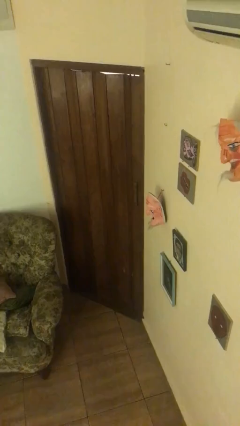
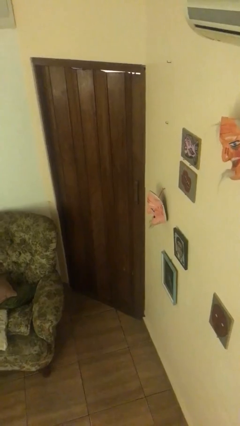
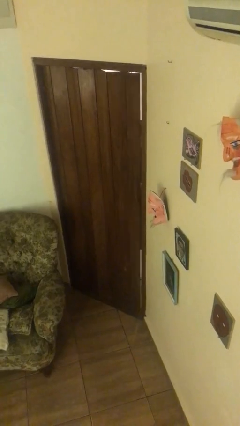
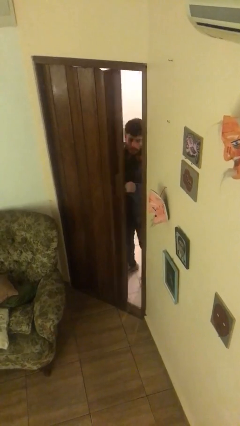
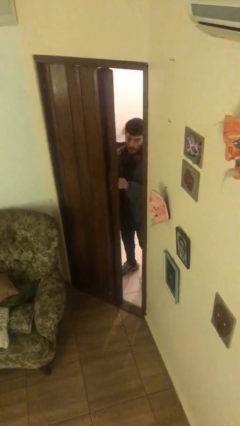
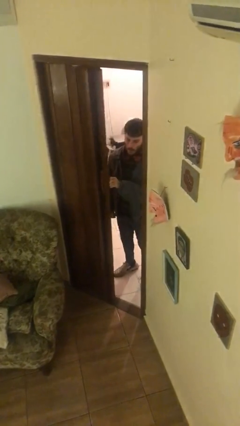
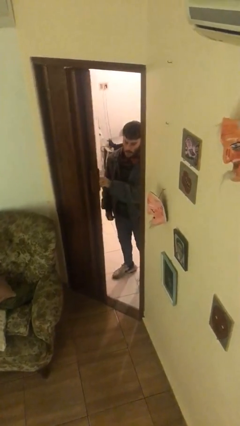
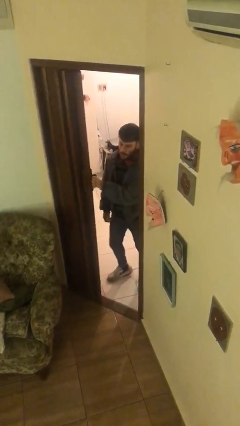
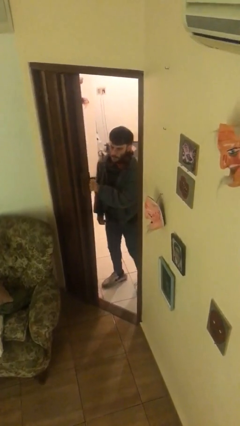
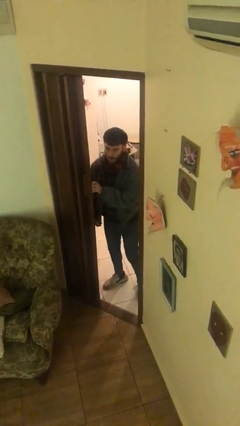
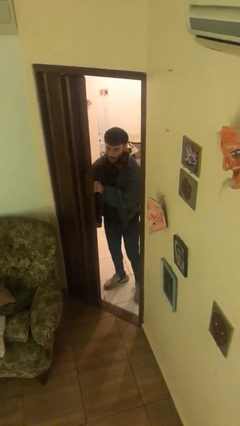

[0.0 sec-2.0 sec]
person opens sliding door

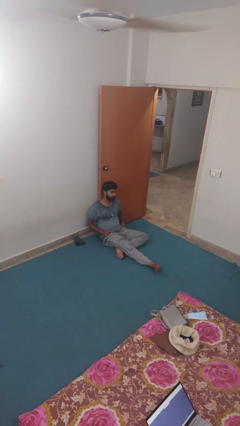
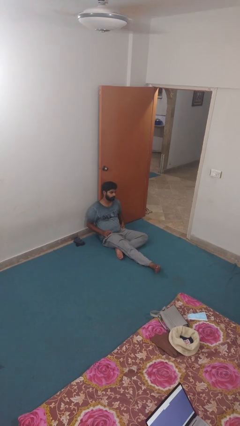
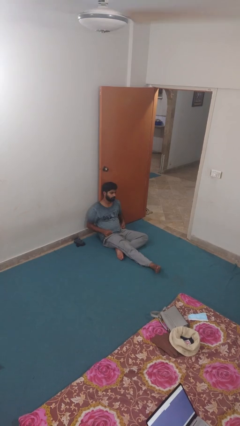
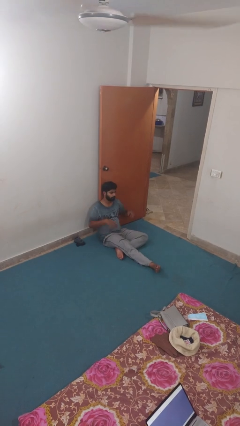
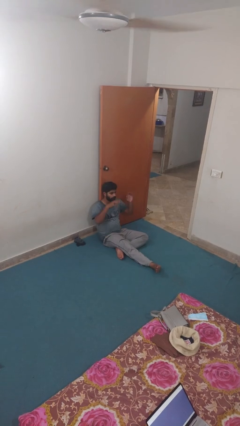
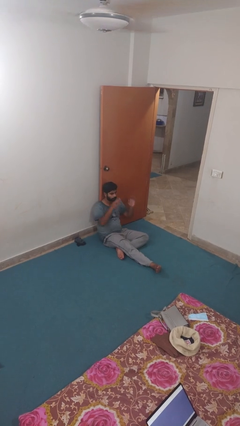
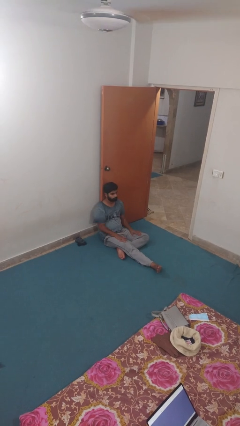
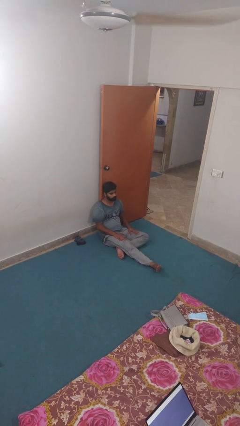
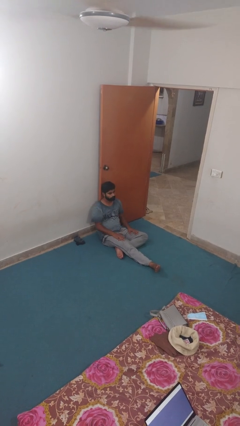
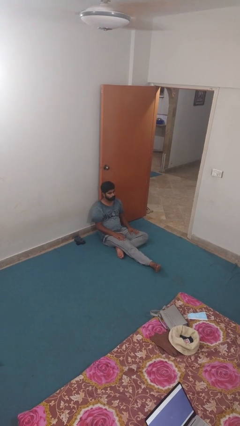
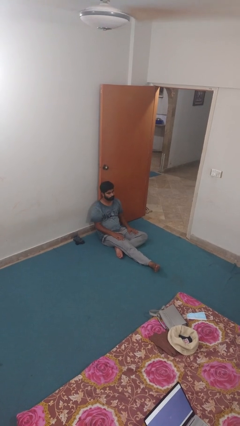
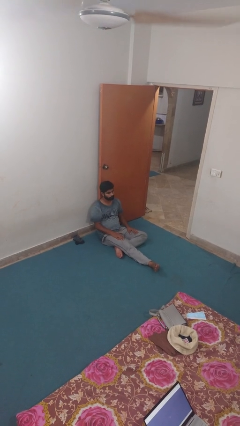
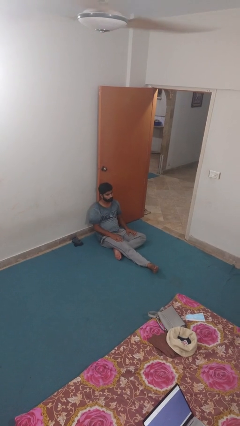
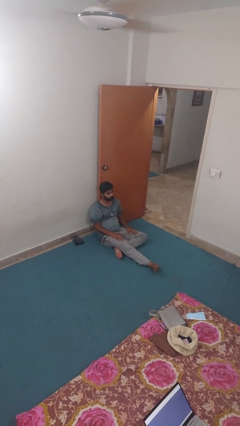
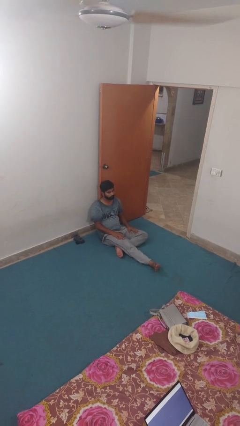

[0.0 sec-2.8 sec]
person slaps hands on thighs

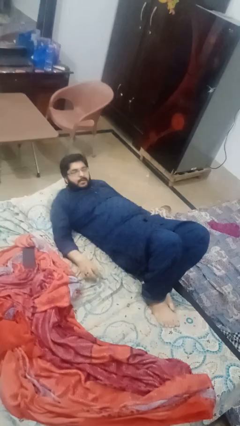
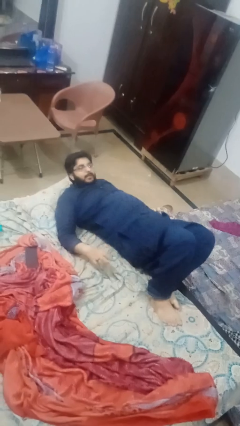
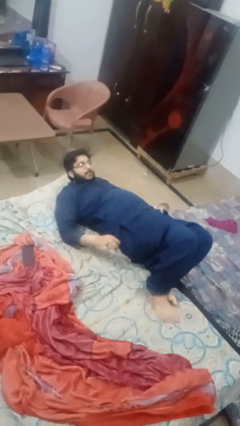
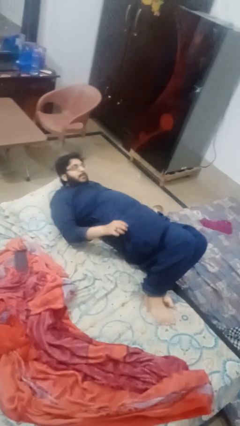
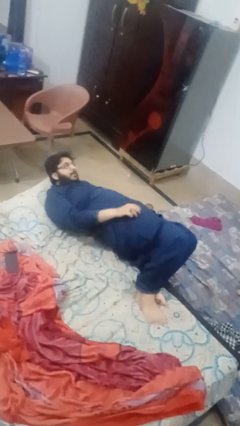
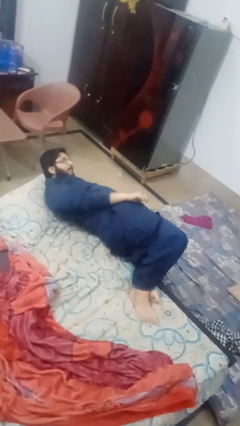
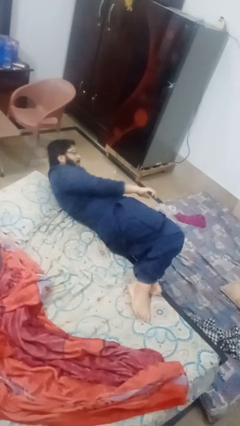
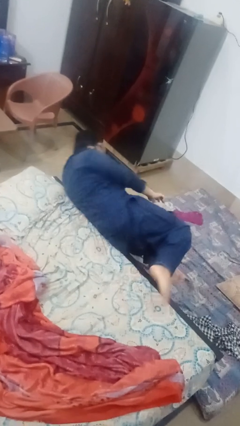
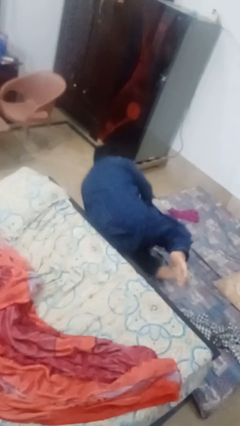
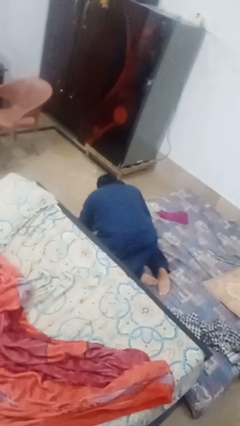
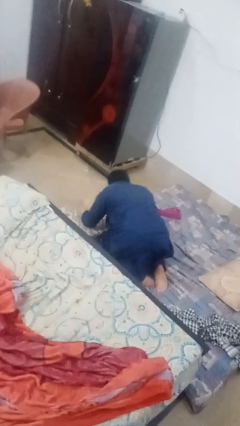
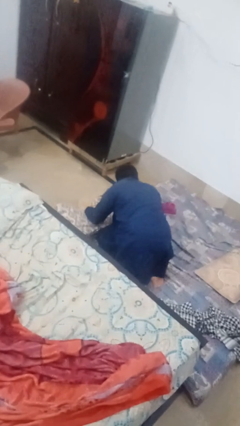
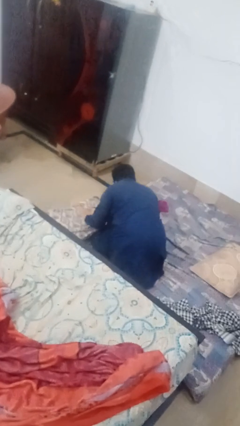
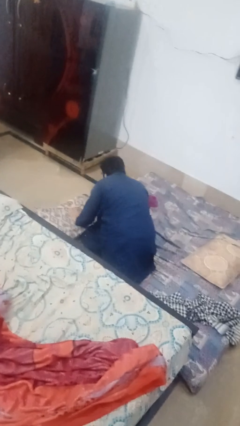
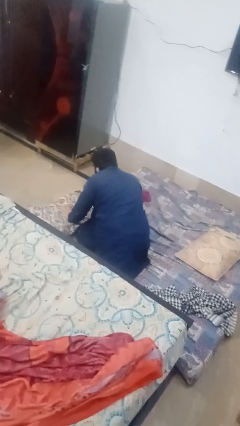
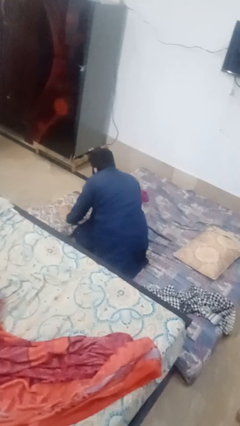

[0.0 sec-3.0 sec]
person falls from bed

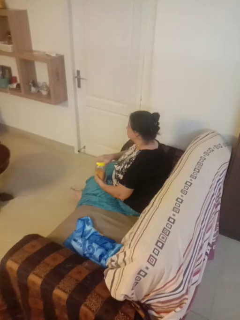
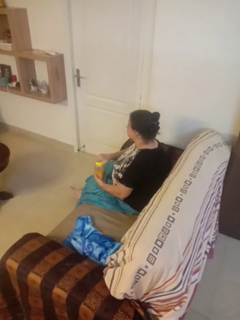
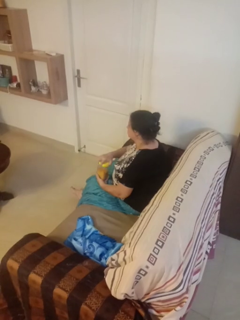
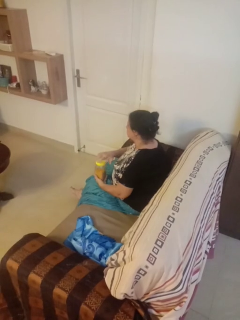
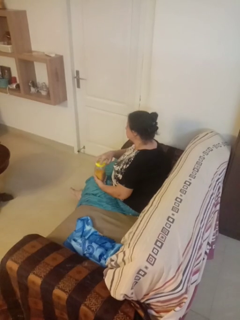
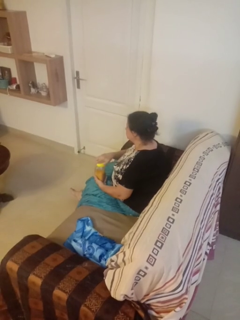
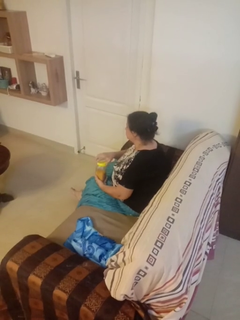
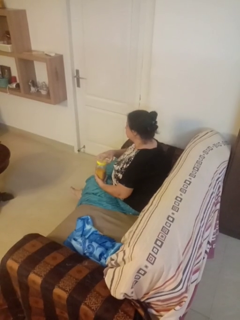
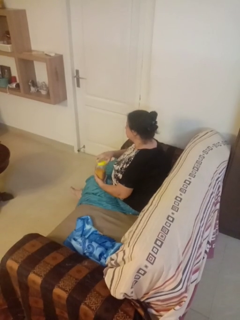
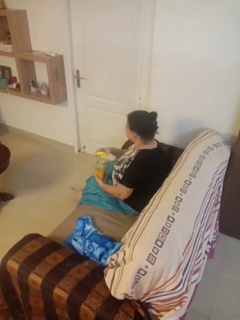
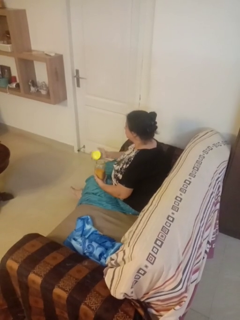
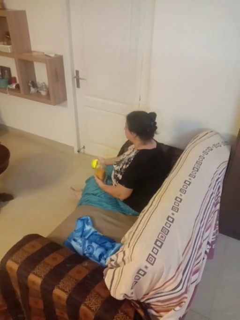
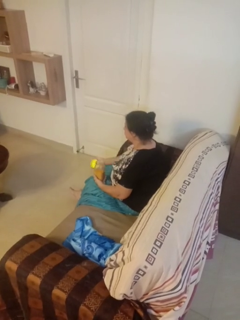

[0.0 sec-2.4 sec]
person opens jar

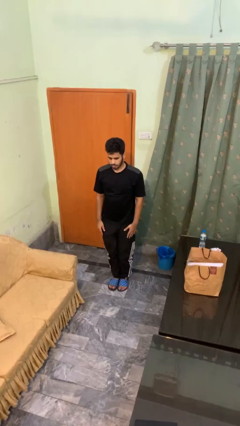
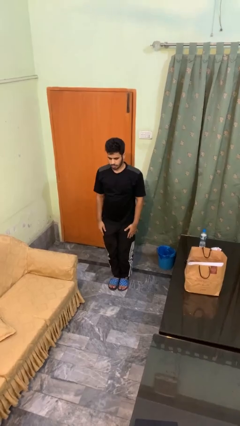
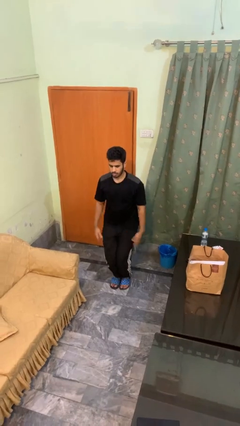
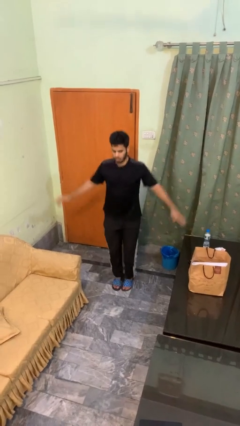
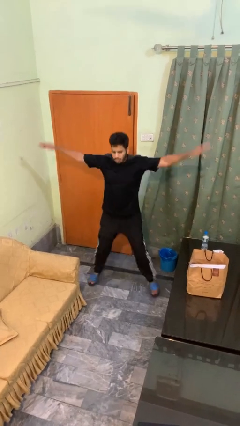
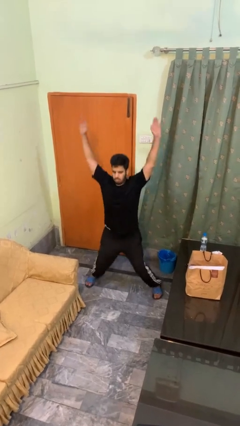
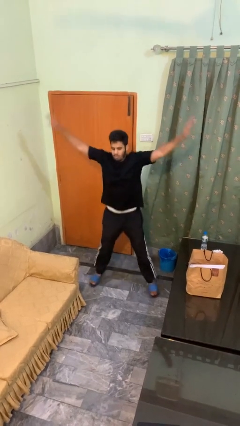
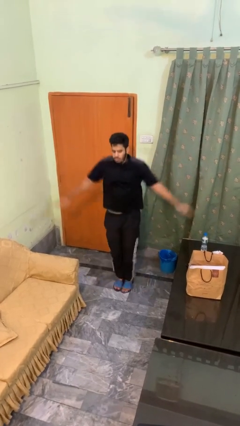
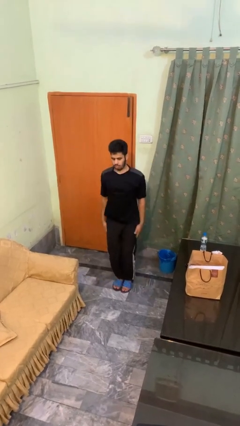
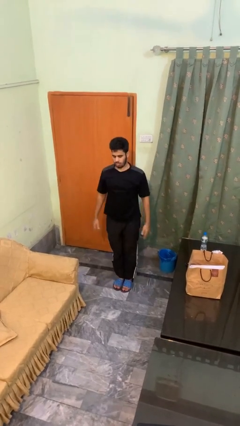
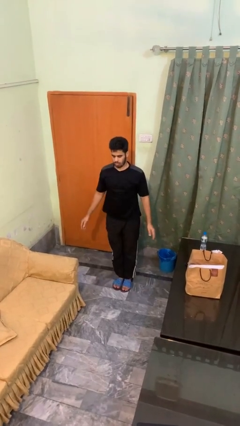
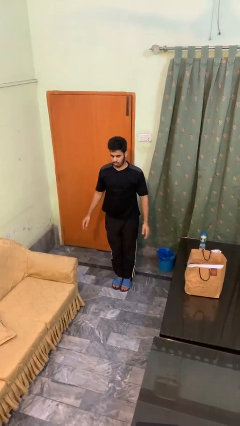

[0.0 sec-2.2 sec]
person exercises with jumping jacks

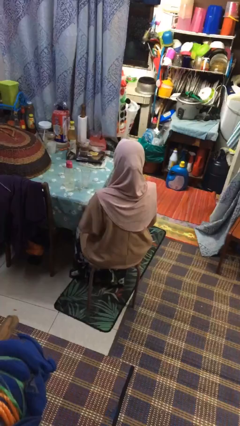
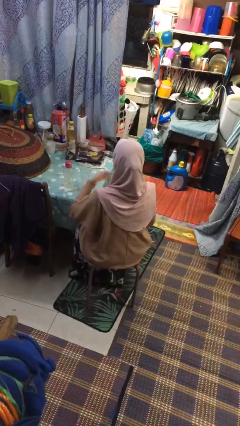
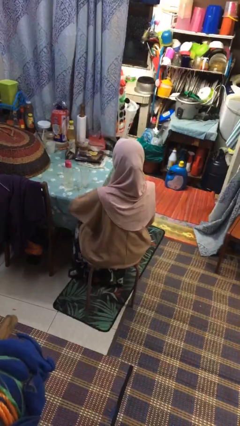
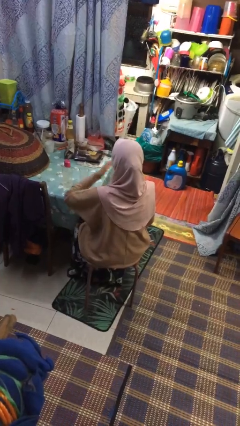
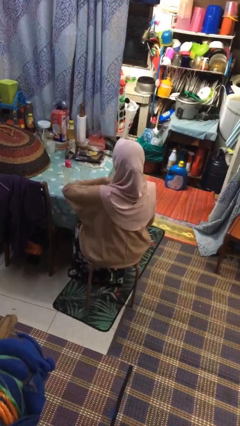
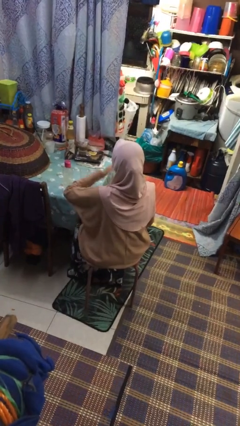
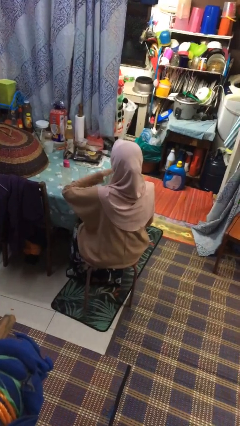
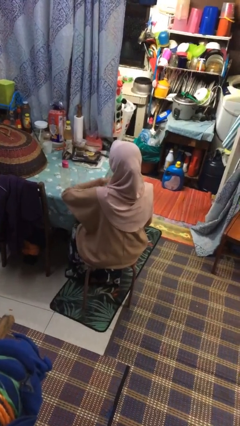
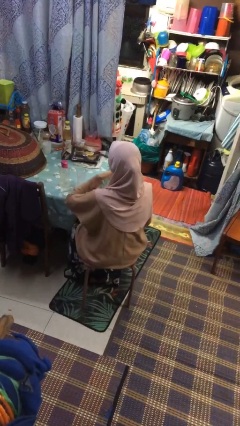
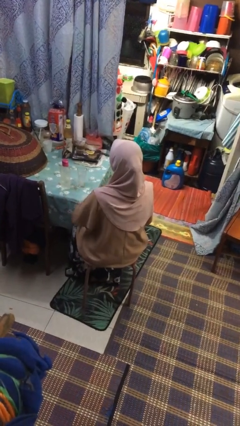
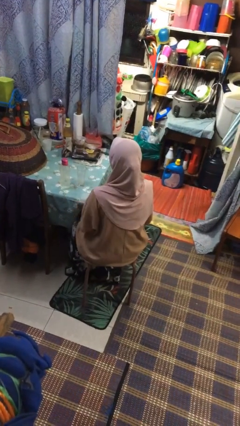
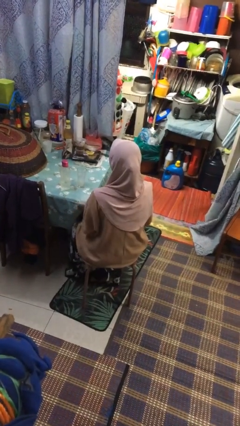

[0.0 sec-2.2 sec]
person drums on chest

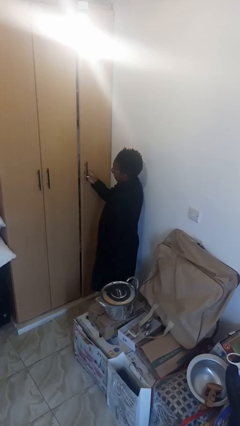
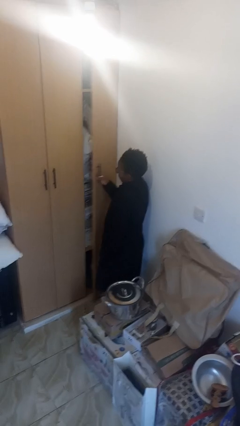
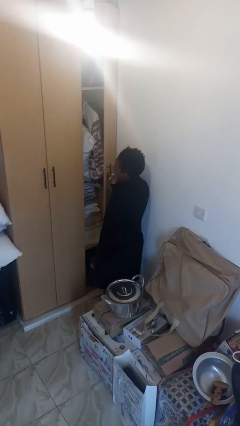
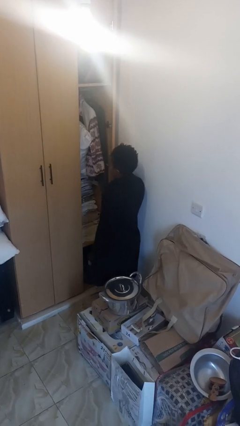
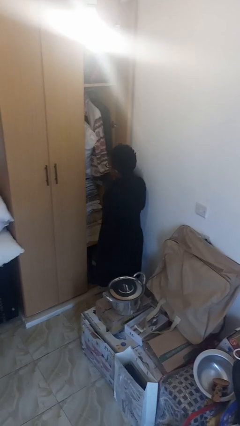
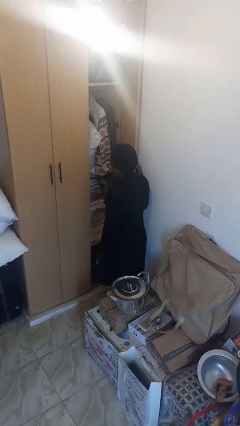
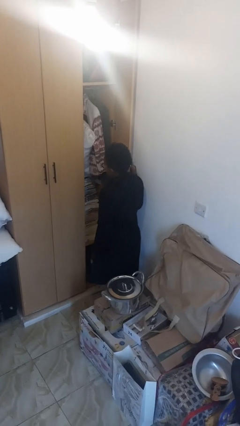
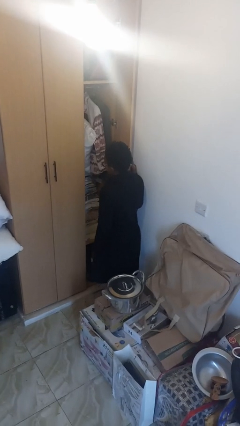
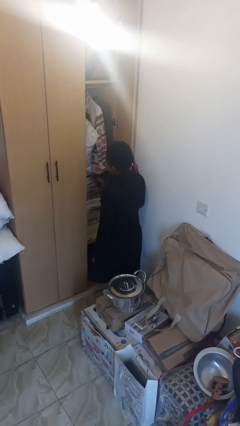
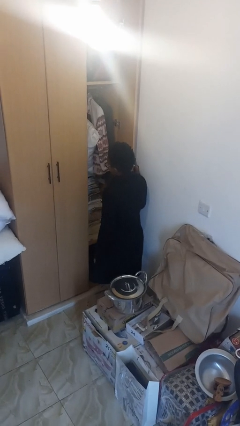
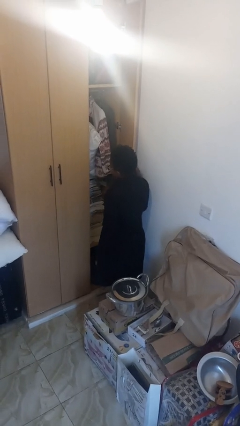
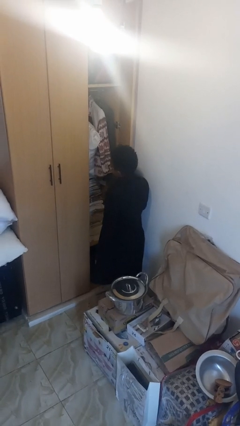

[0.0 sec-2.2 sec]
person opens closet door

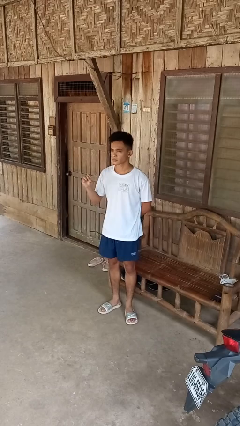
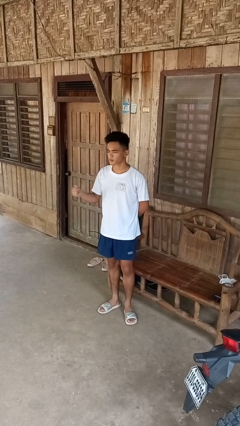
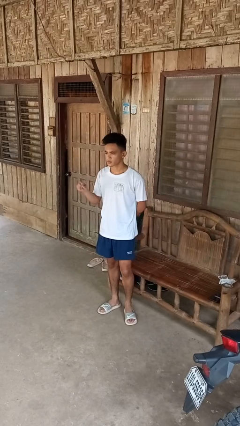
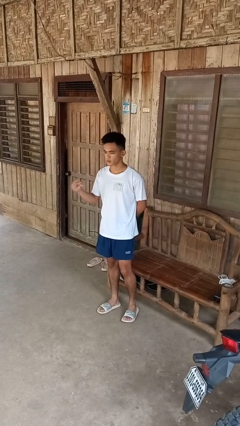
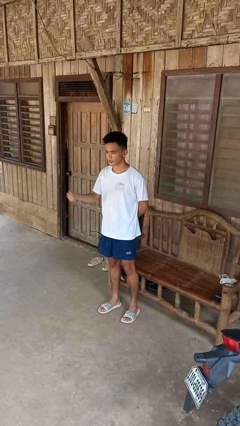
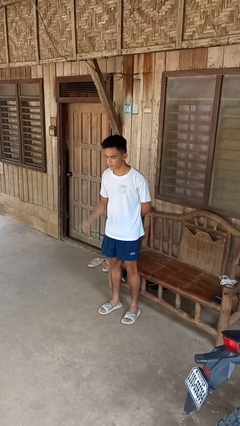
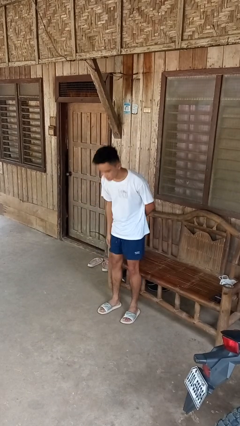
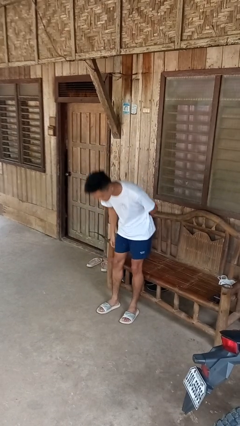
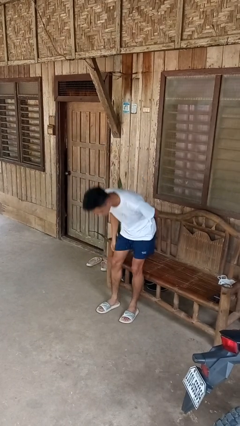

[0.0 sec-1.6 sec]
person snaps fingers
